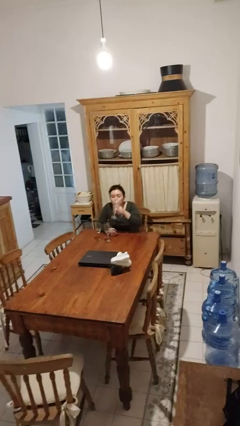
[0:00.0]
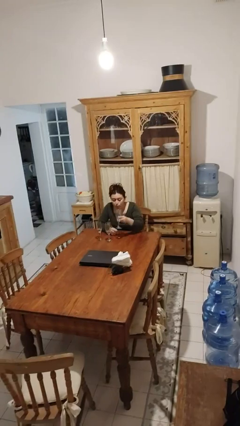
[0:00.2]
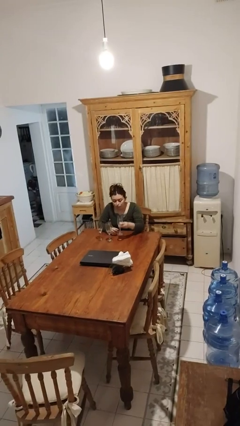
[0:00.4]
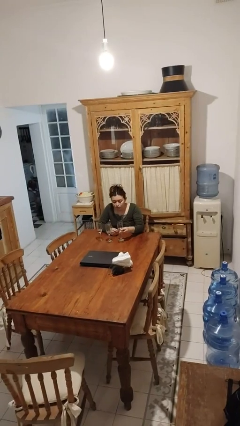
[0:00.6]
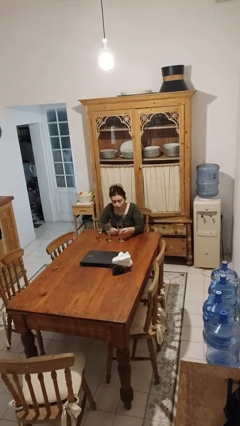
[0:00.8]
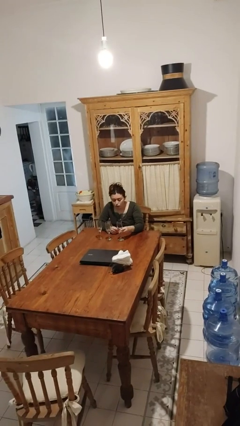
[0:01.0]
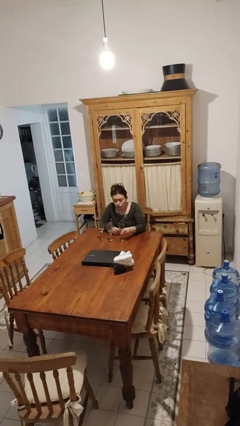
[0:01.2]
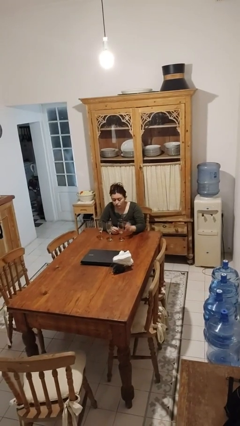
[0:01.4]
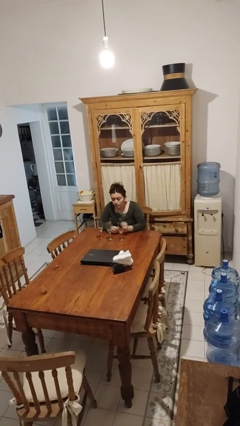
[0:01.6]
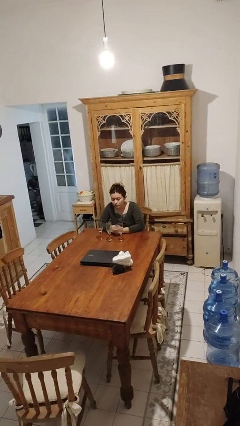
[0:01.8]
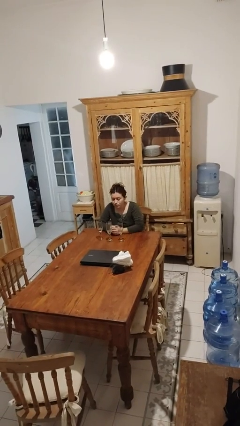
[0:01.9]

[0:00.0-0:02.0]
person puts down object on table

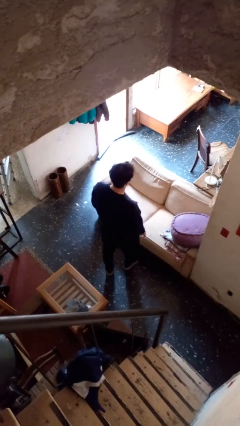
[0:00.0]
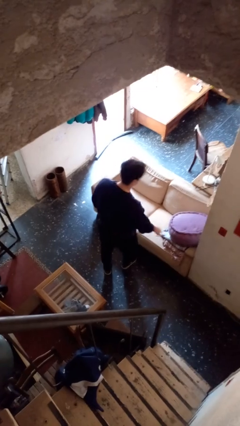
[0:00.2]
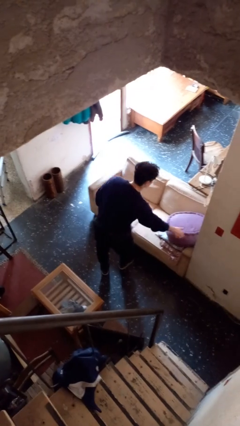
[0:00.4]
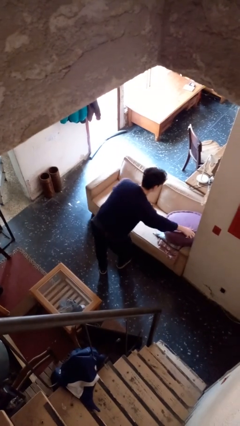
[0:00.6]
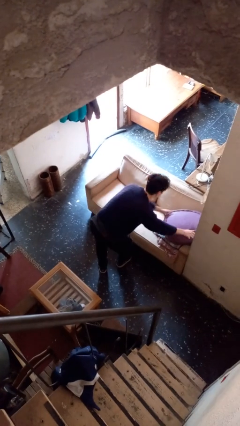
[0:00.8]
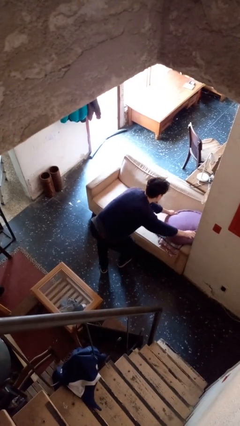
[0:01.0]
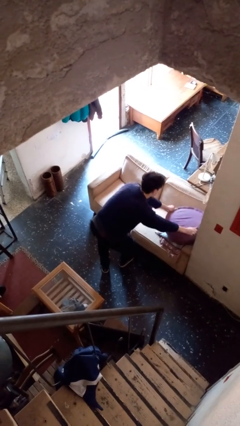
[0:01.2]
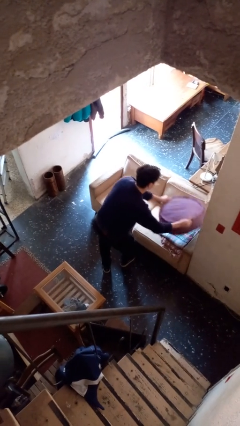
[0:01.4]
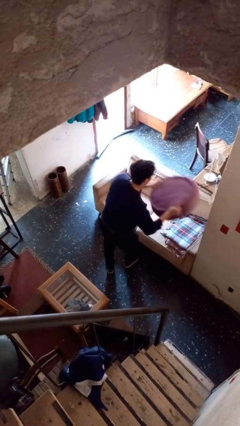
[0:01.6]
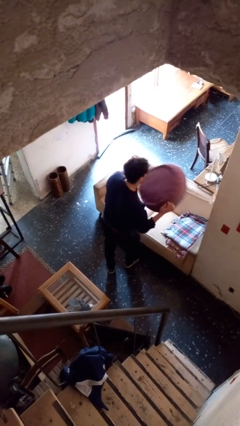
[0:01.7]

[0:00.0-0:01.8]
person picks up object from couch

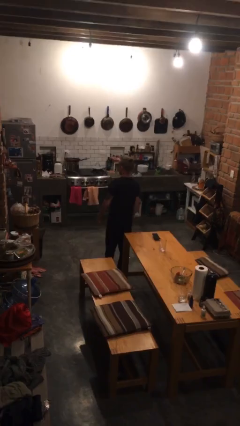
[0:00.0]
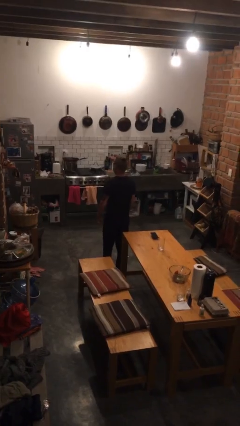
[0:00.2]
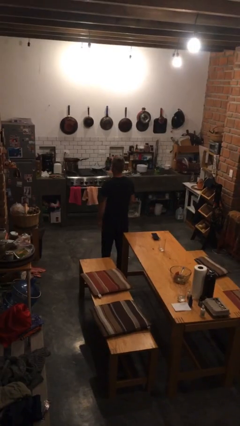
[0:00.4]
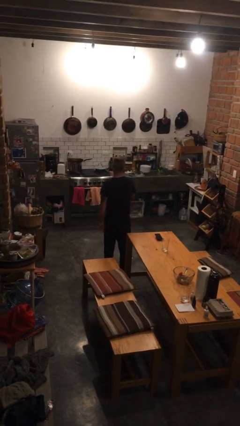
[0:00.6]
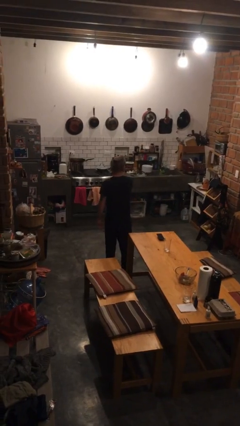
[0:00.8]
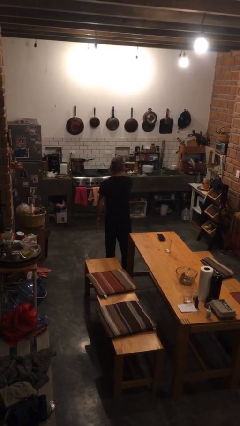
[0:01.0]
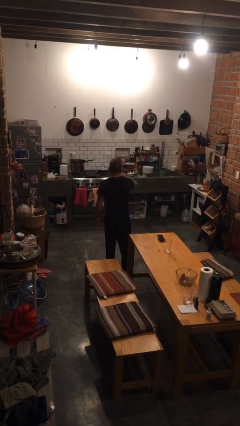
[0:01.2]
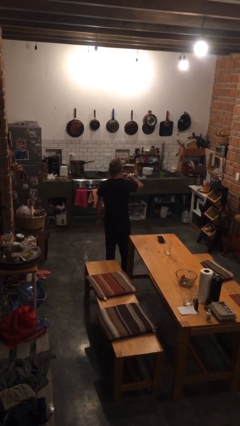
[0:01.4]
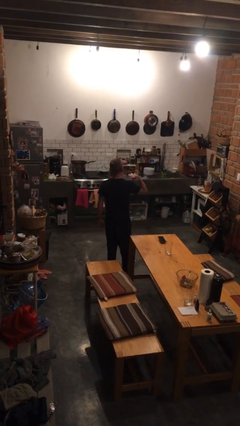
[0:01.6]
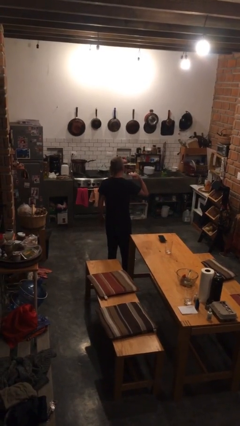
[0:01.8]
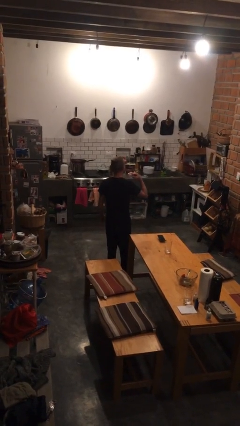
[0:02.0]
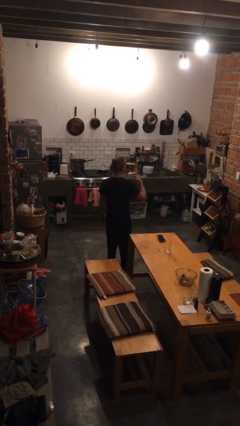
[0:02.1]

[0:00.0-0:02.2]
person gestures cut

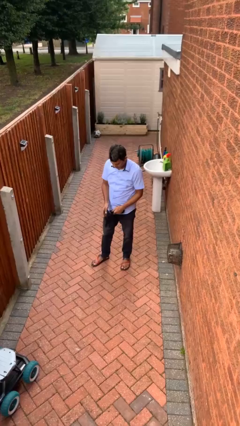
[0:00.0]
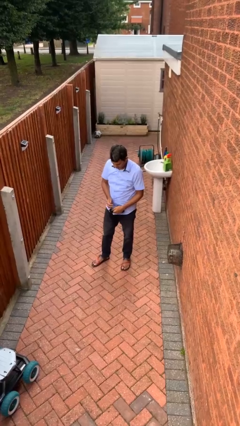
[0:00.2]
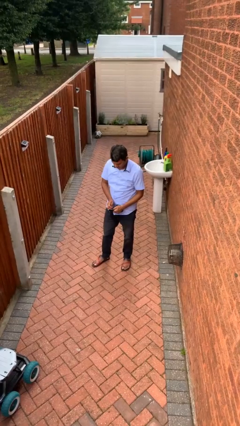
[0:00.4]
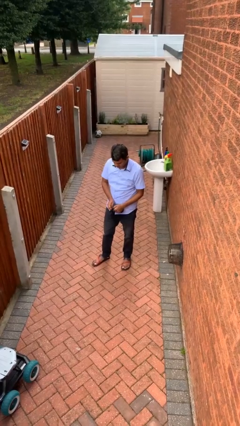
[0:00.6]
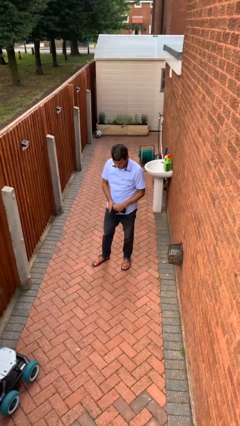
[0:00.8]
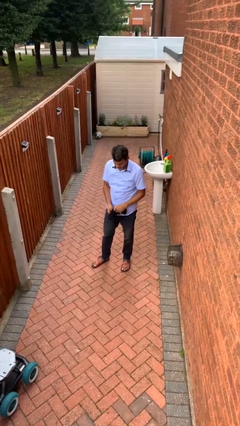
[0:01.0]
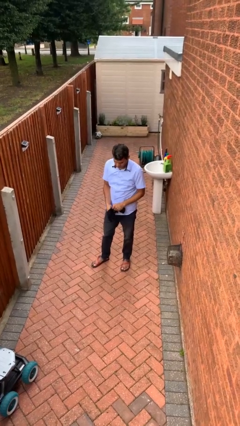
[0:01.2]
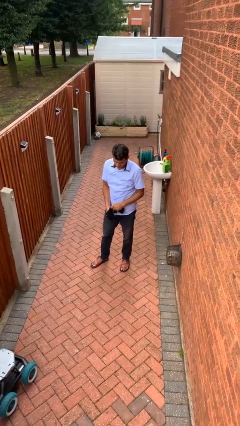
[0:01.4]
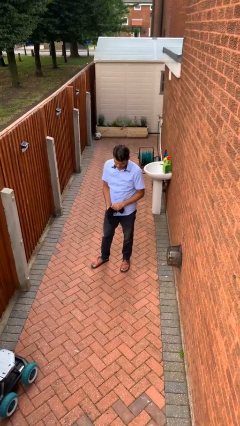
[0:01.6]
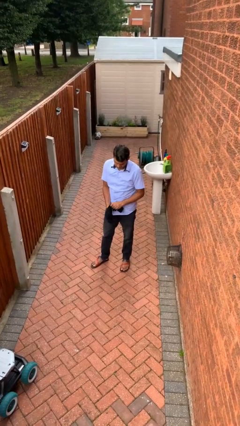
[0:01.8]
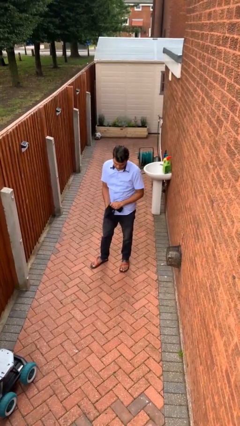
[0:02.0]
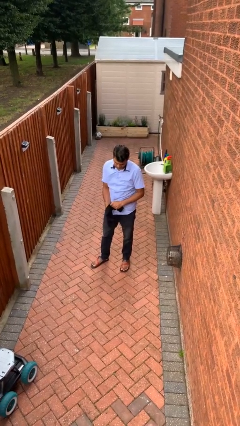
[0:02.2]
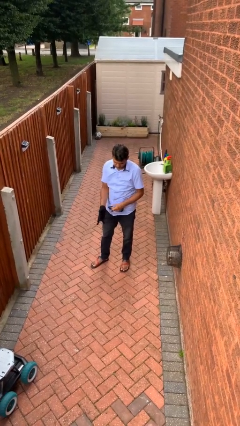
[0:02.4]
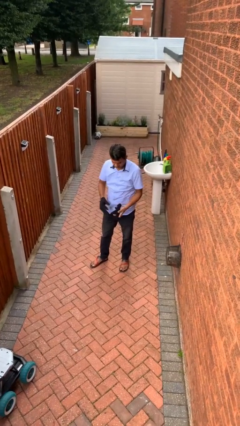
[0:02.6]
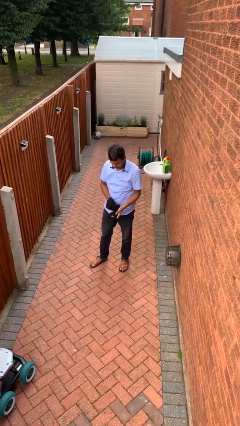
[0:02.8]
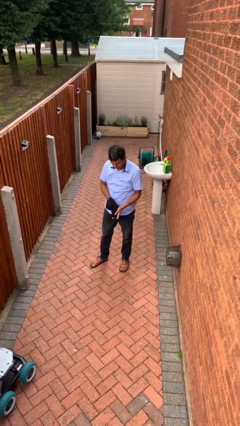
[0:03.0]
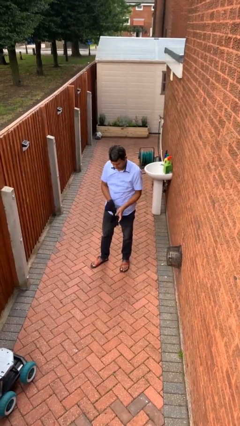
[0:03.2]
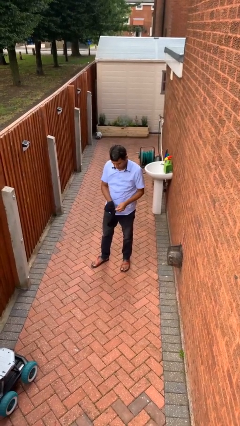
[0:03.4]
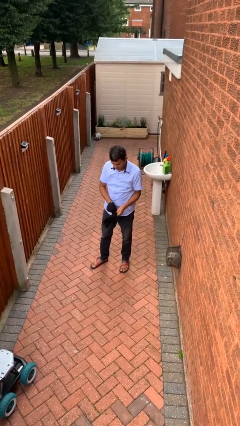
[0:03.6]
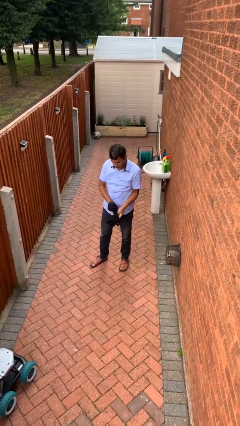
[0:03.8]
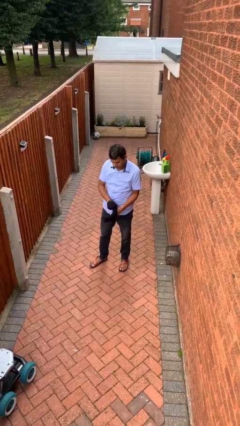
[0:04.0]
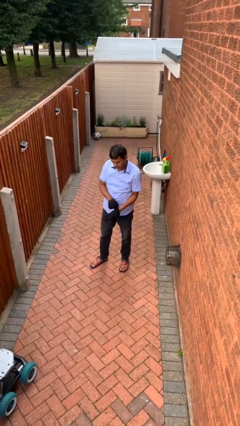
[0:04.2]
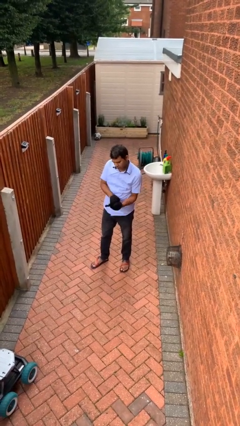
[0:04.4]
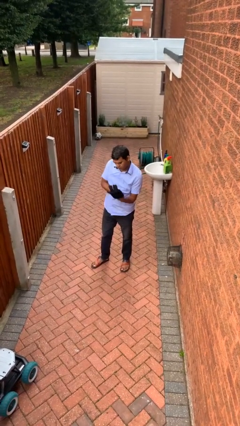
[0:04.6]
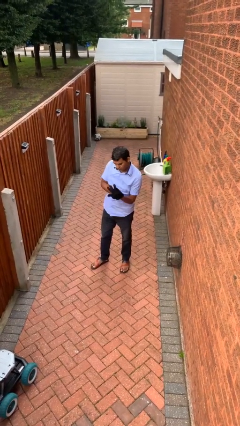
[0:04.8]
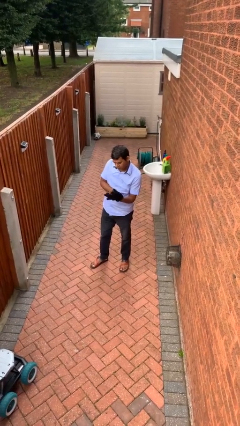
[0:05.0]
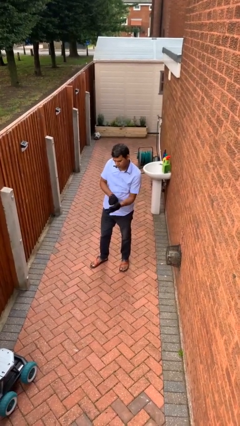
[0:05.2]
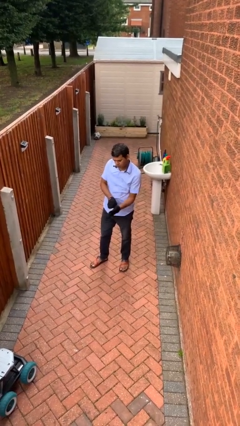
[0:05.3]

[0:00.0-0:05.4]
person puts on gloves

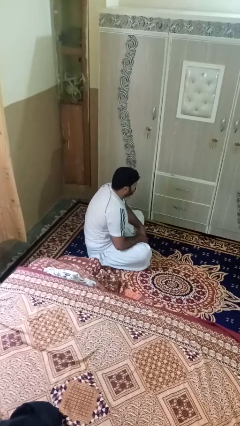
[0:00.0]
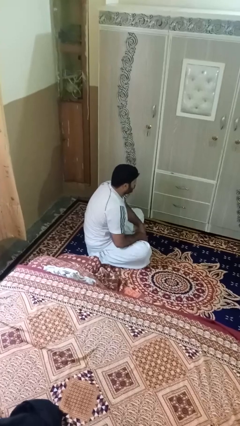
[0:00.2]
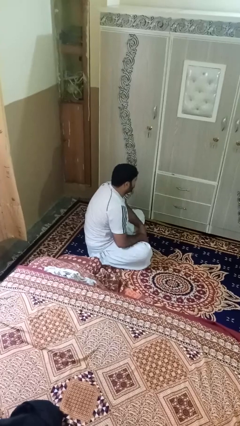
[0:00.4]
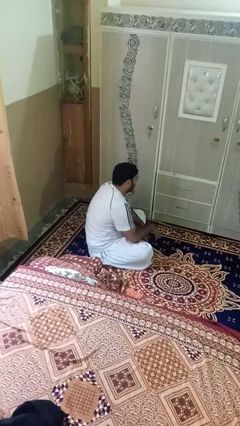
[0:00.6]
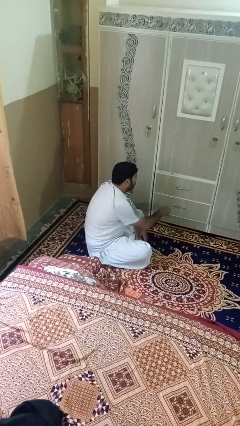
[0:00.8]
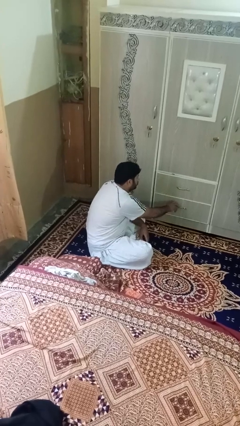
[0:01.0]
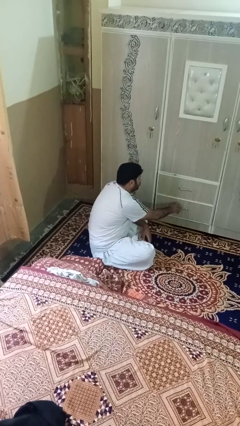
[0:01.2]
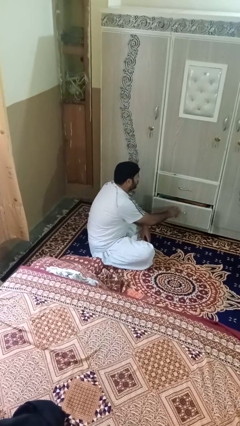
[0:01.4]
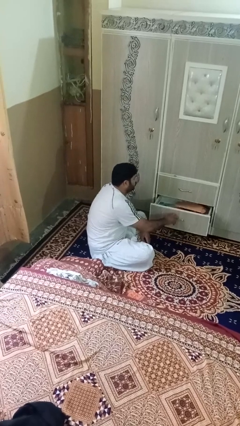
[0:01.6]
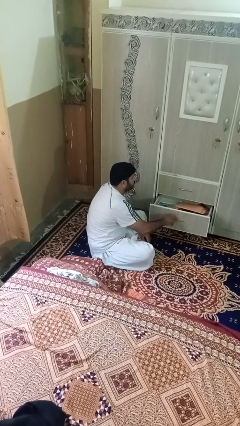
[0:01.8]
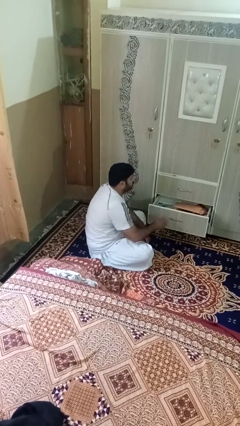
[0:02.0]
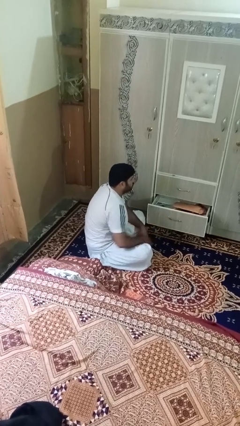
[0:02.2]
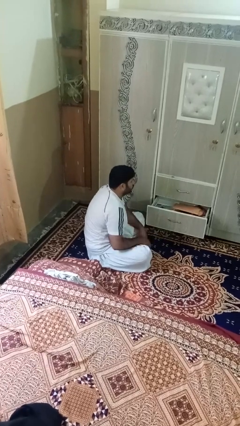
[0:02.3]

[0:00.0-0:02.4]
person opens dresser drawer

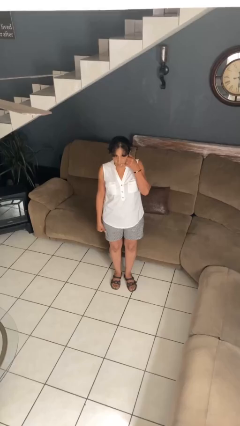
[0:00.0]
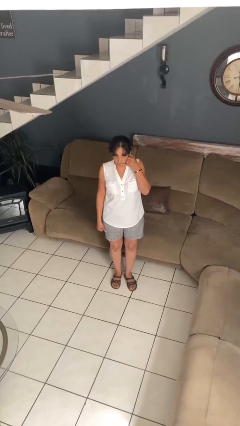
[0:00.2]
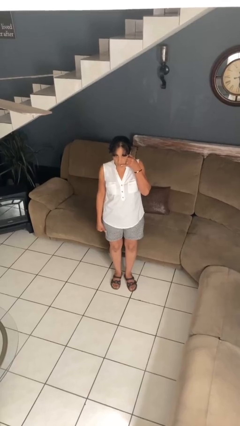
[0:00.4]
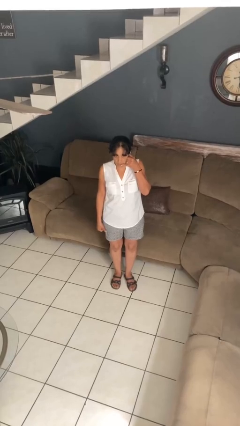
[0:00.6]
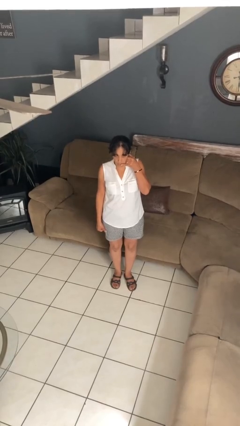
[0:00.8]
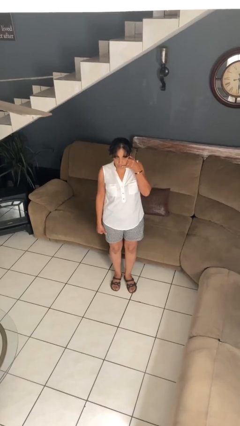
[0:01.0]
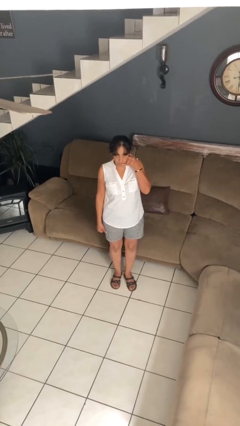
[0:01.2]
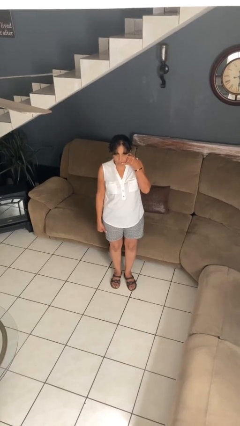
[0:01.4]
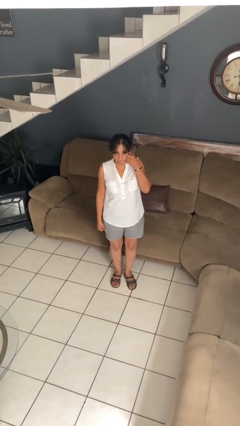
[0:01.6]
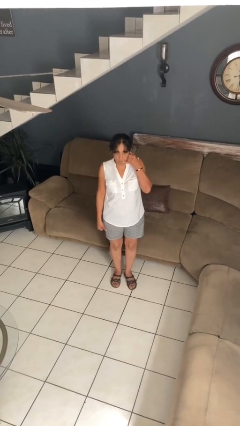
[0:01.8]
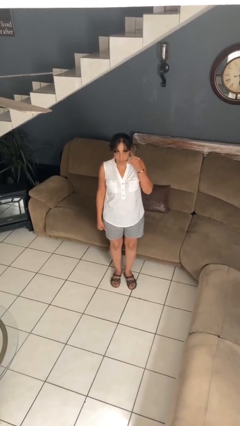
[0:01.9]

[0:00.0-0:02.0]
person gestures call me

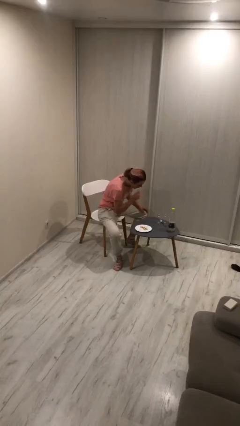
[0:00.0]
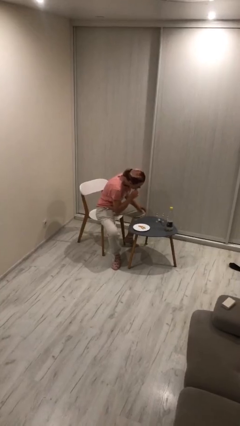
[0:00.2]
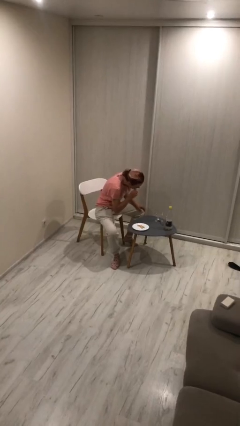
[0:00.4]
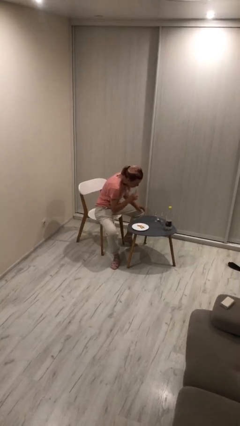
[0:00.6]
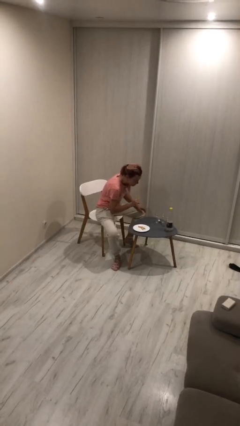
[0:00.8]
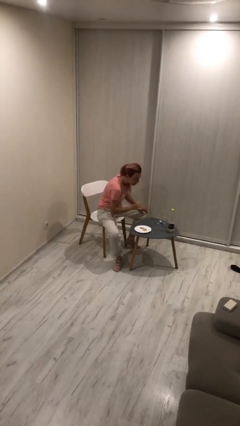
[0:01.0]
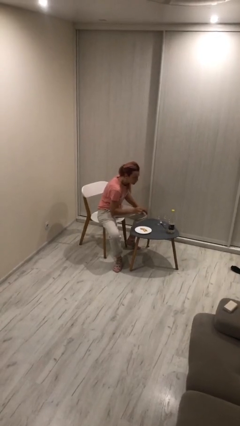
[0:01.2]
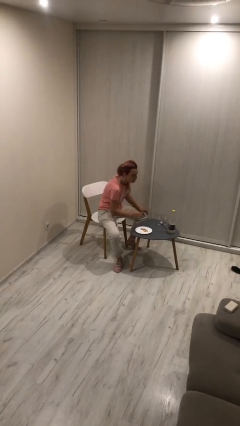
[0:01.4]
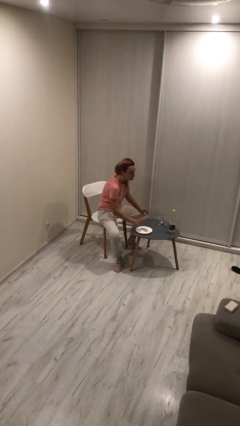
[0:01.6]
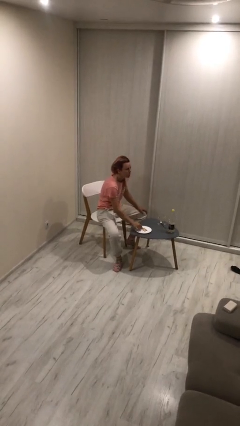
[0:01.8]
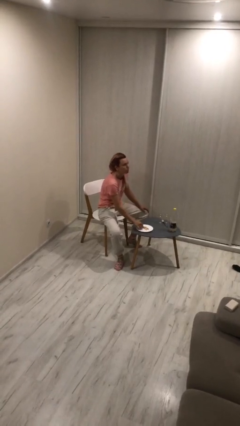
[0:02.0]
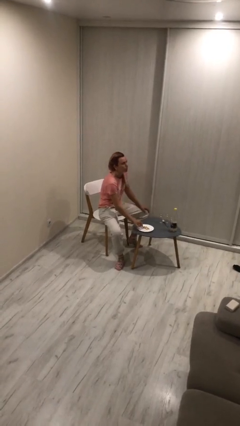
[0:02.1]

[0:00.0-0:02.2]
person eats with hands
